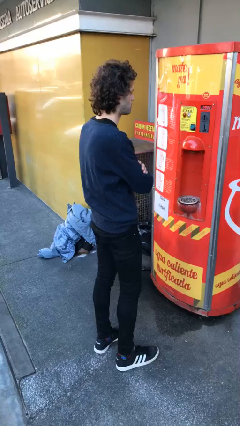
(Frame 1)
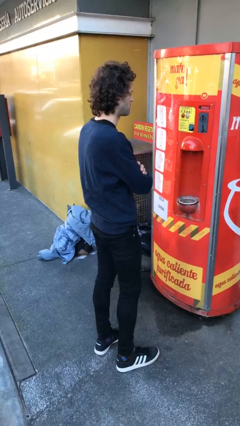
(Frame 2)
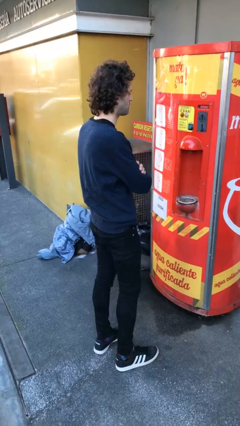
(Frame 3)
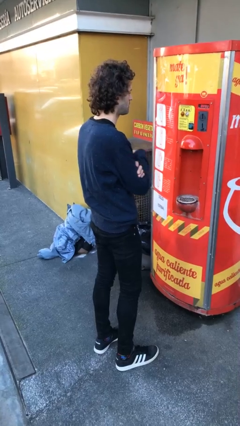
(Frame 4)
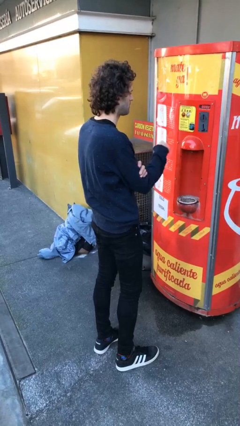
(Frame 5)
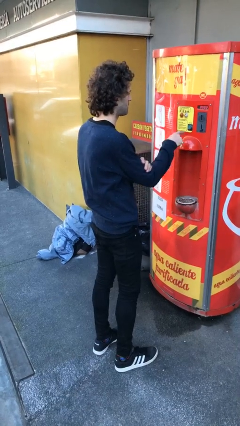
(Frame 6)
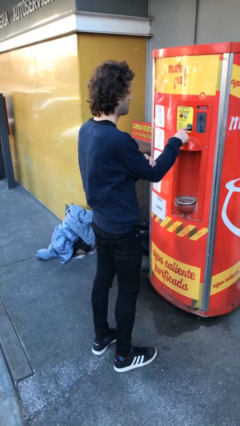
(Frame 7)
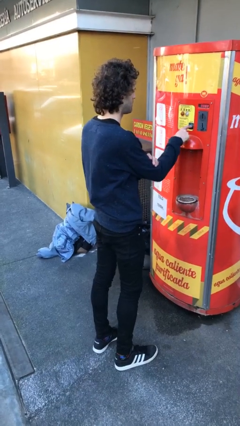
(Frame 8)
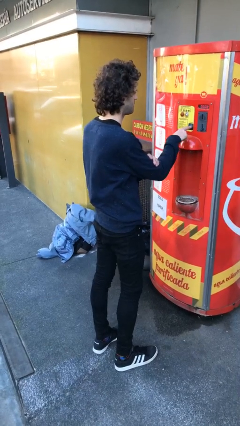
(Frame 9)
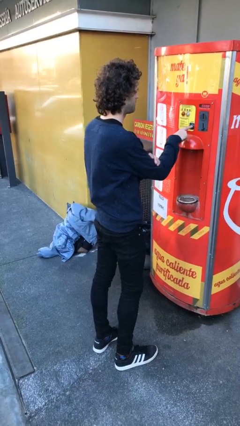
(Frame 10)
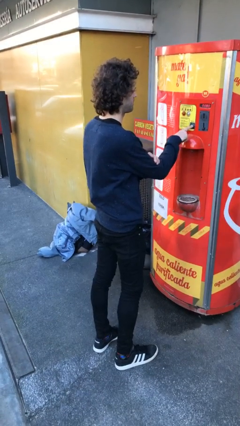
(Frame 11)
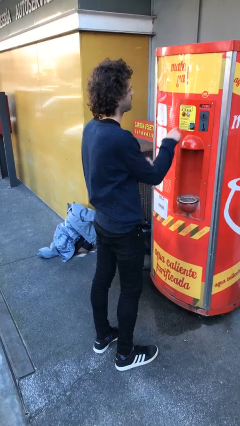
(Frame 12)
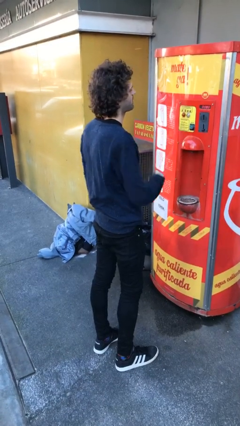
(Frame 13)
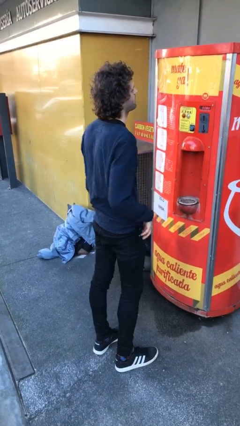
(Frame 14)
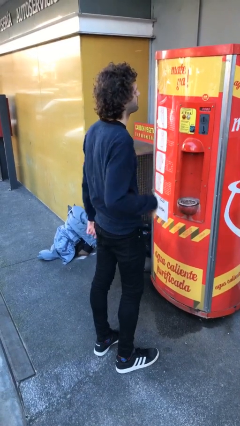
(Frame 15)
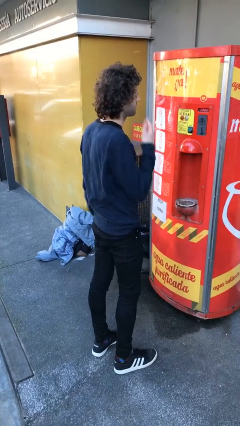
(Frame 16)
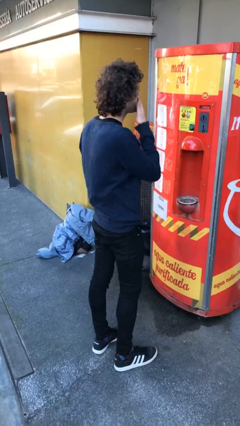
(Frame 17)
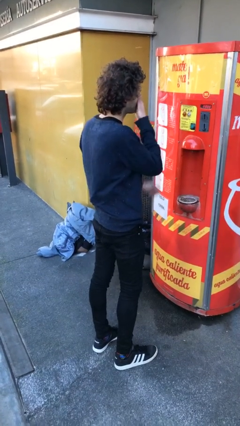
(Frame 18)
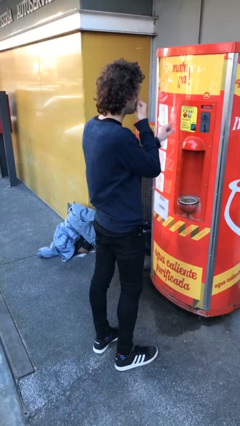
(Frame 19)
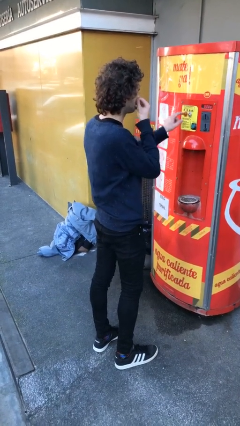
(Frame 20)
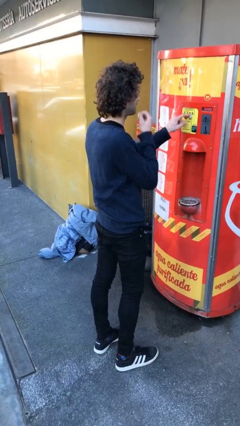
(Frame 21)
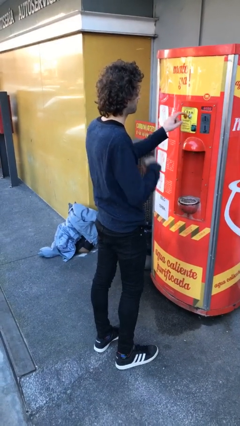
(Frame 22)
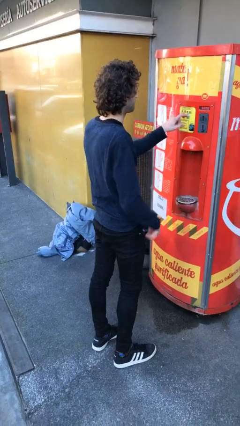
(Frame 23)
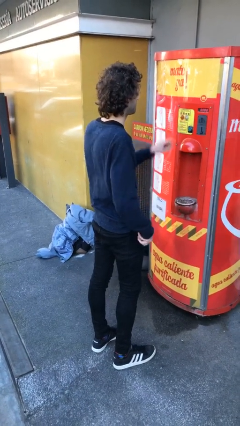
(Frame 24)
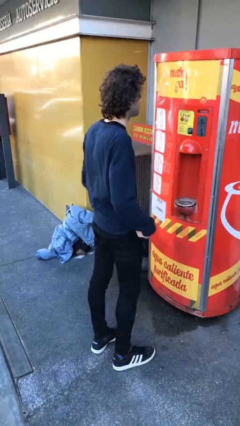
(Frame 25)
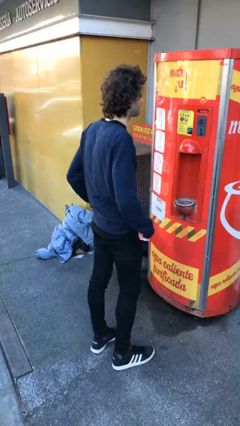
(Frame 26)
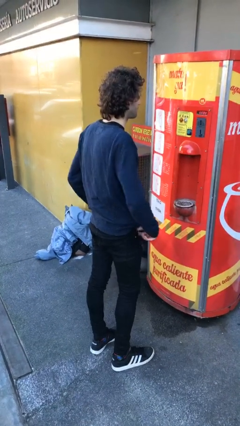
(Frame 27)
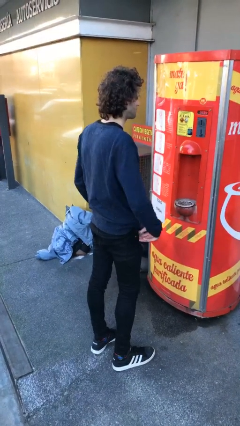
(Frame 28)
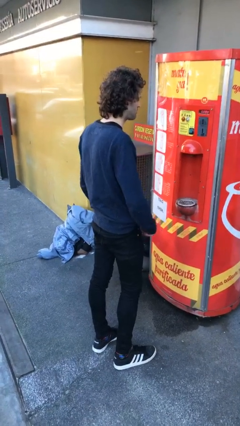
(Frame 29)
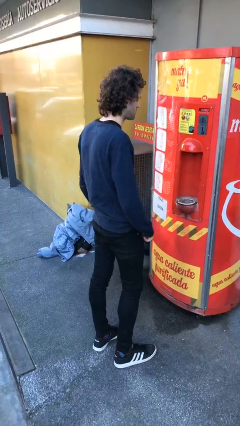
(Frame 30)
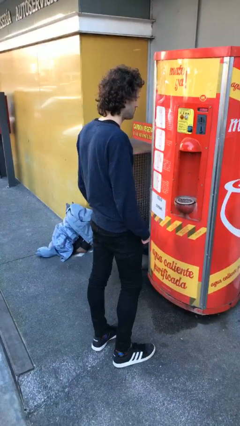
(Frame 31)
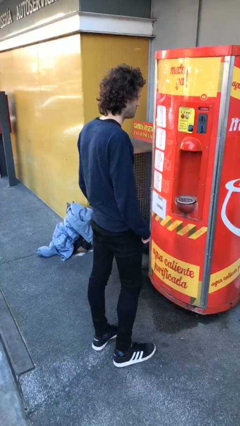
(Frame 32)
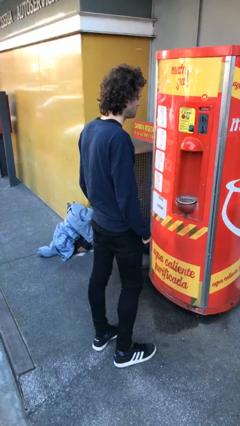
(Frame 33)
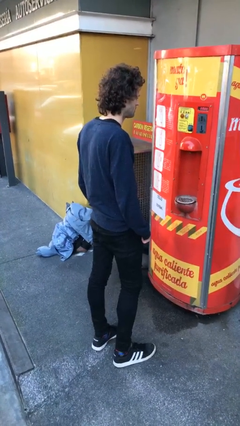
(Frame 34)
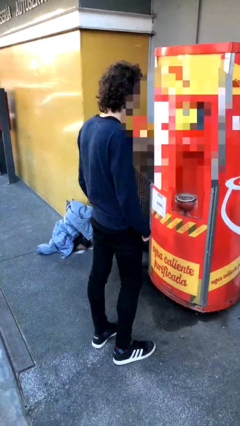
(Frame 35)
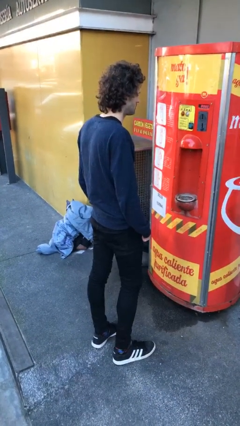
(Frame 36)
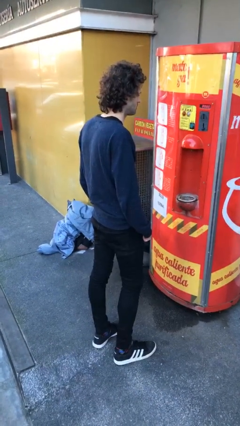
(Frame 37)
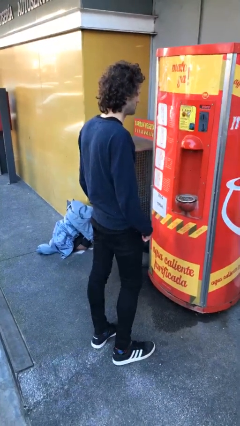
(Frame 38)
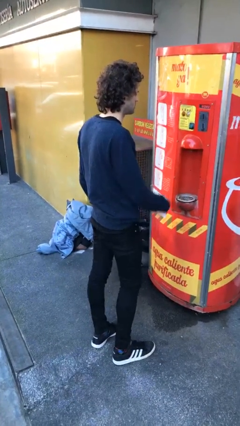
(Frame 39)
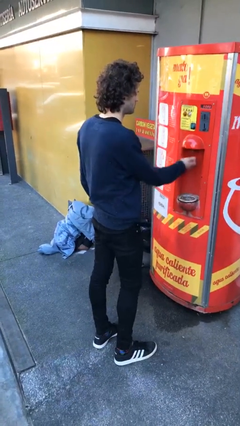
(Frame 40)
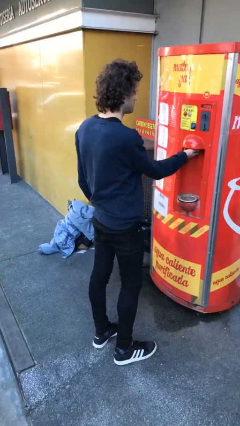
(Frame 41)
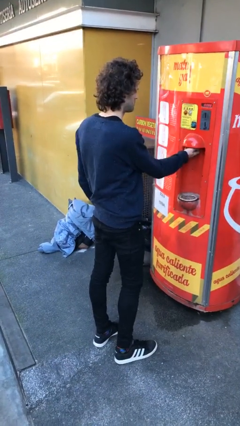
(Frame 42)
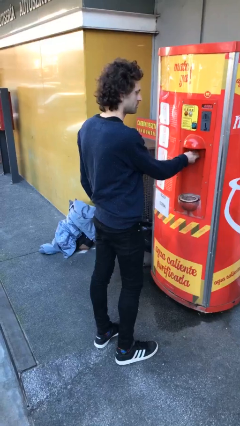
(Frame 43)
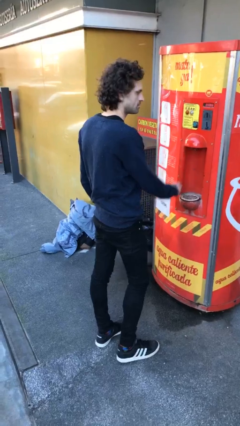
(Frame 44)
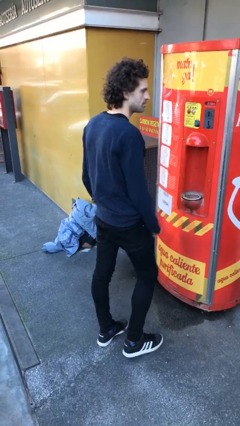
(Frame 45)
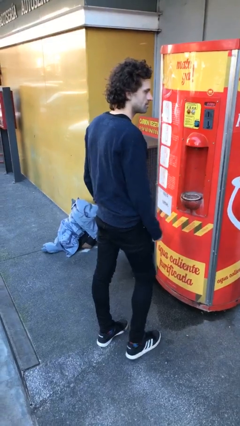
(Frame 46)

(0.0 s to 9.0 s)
person purchases from machine

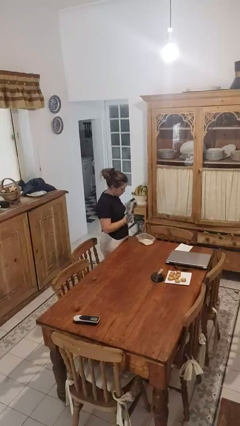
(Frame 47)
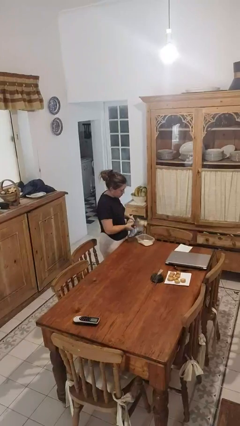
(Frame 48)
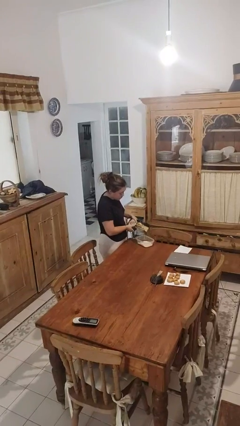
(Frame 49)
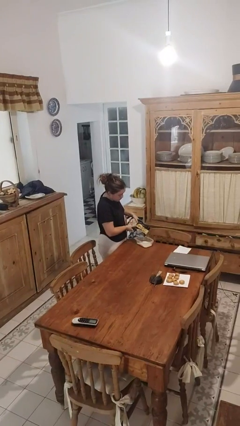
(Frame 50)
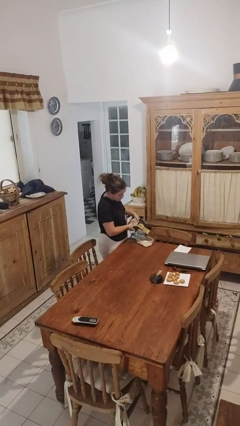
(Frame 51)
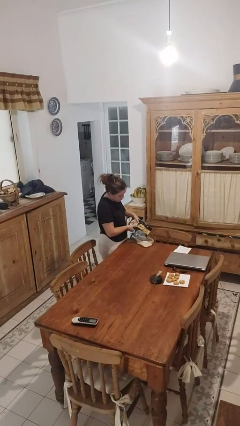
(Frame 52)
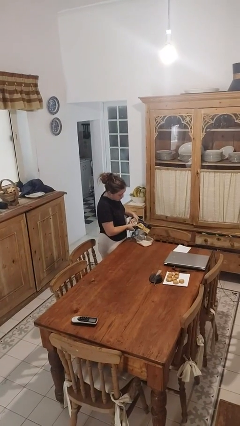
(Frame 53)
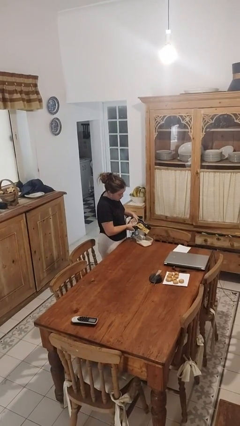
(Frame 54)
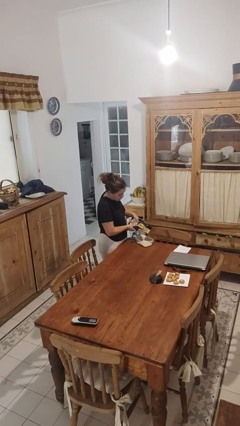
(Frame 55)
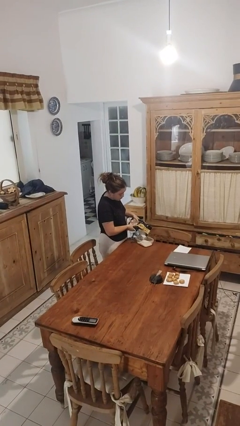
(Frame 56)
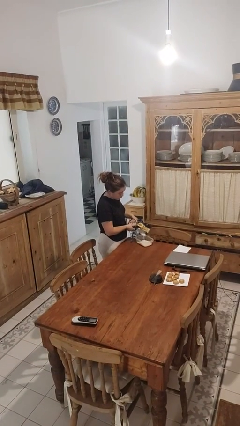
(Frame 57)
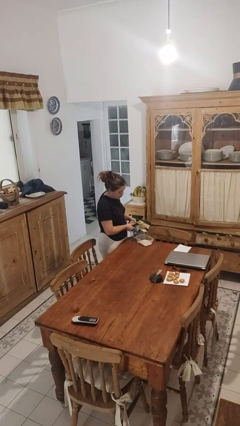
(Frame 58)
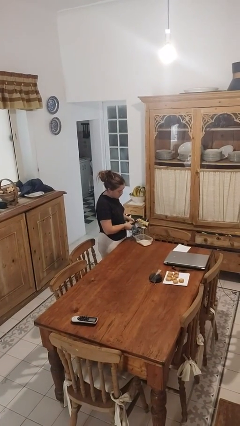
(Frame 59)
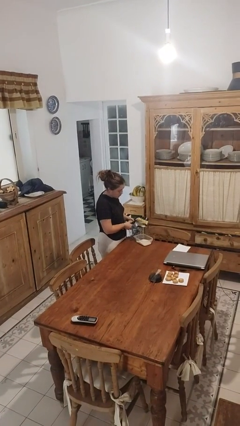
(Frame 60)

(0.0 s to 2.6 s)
person pours into bowl

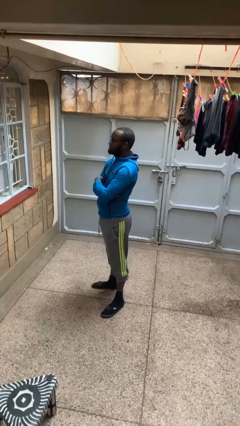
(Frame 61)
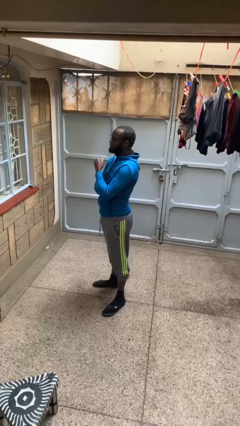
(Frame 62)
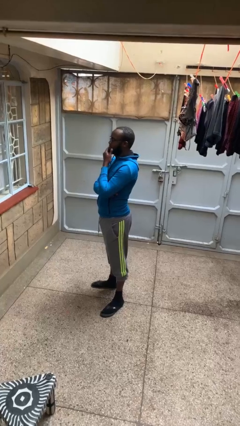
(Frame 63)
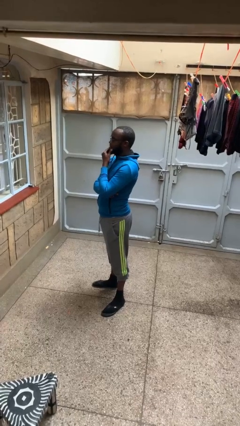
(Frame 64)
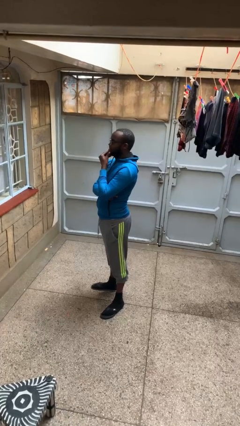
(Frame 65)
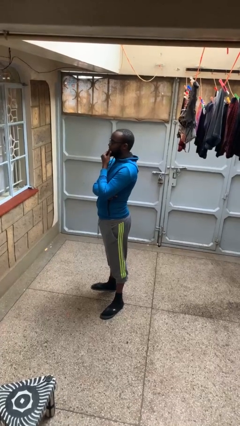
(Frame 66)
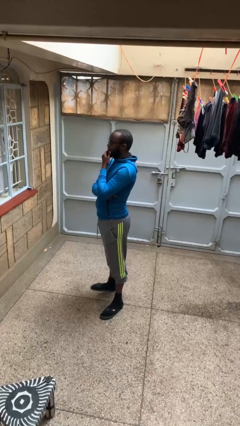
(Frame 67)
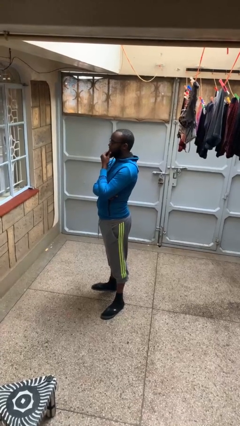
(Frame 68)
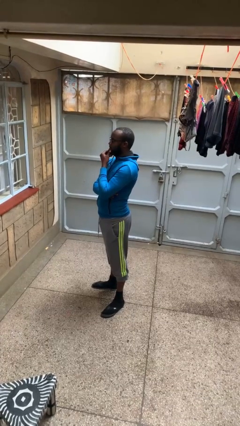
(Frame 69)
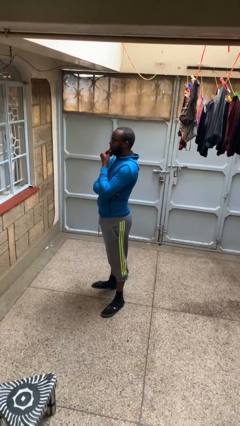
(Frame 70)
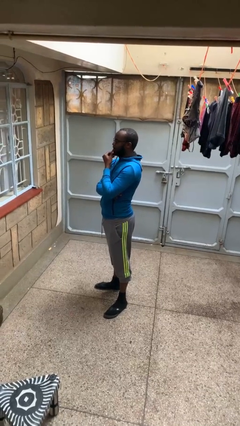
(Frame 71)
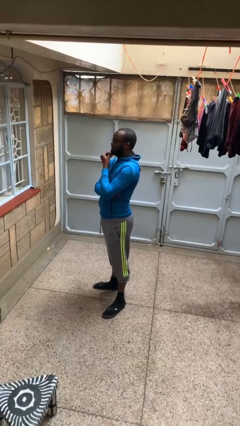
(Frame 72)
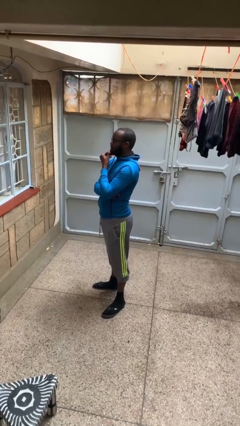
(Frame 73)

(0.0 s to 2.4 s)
person strokes chin

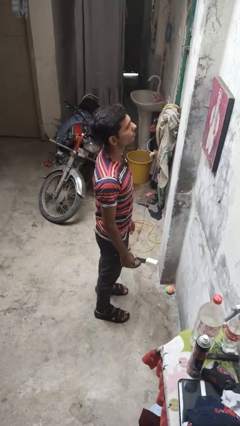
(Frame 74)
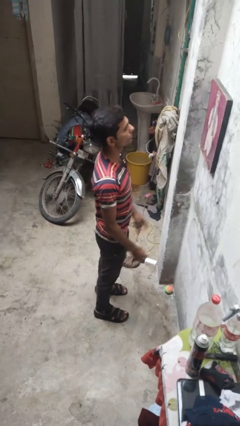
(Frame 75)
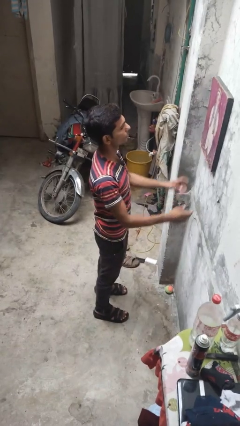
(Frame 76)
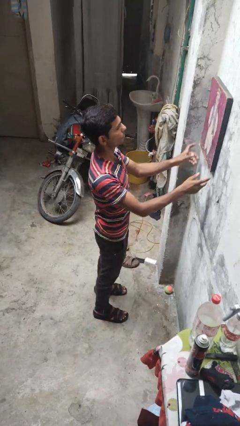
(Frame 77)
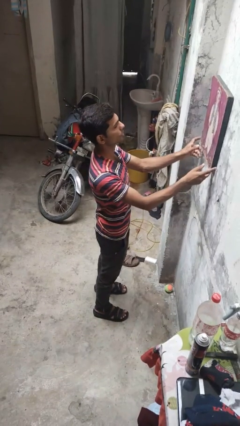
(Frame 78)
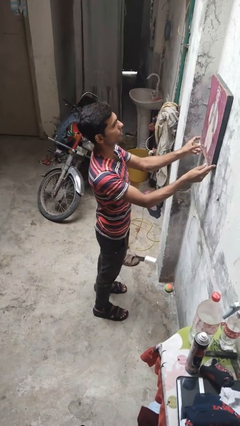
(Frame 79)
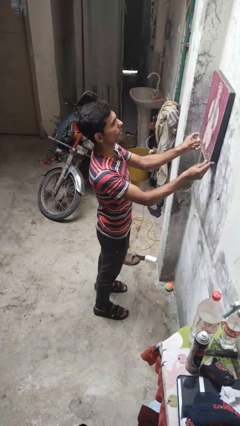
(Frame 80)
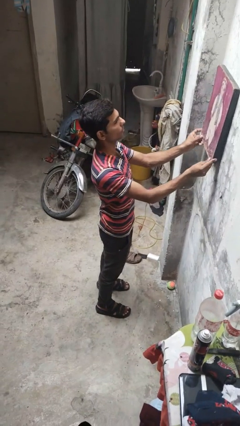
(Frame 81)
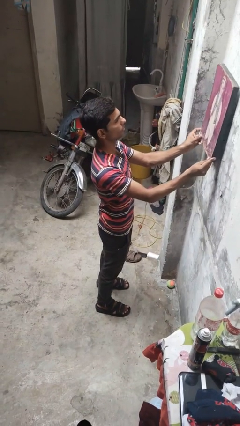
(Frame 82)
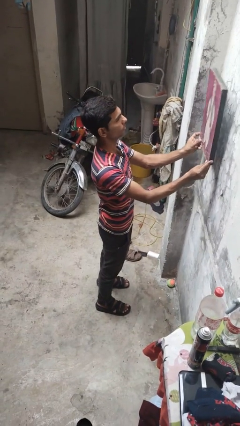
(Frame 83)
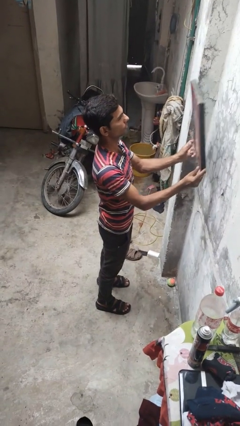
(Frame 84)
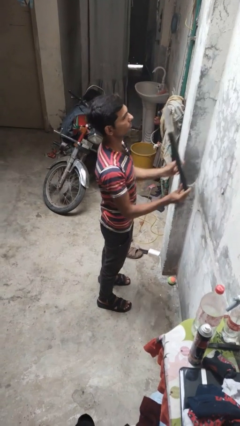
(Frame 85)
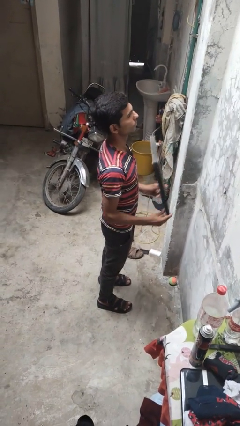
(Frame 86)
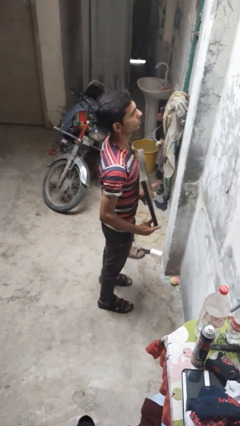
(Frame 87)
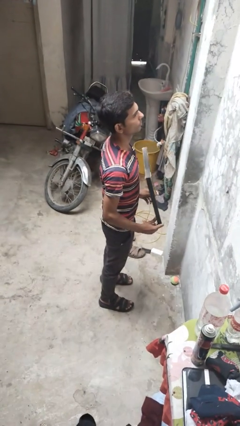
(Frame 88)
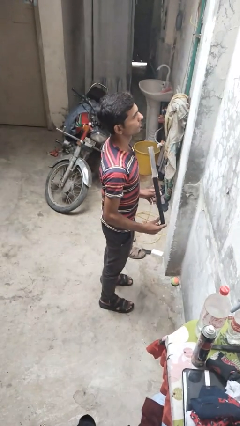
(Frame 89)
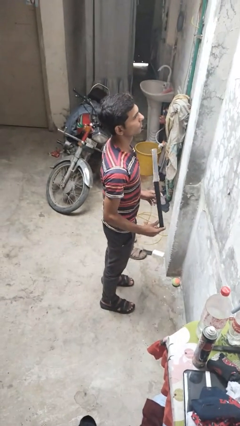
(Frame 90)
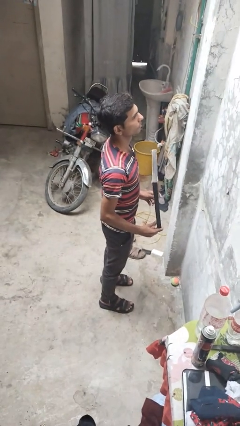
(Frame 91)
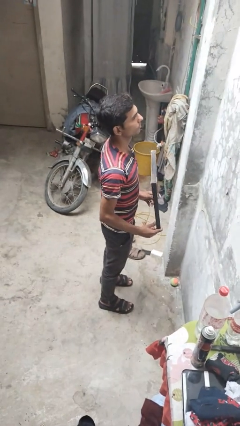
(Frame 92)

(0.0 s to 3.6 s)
person takes down picture frame
